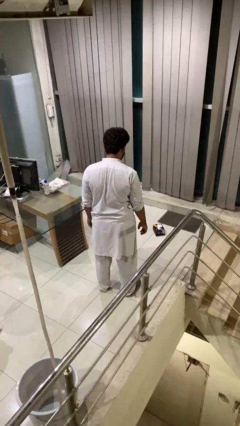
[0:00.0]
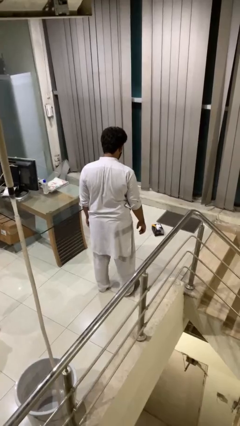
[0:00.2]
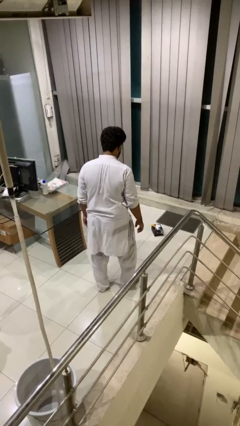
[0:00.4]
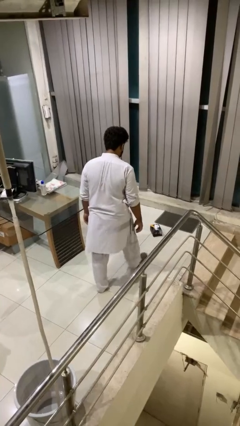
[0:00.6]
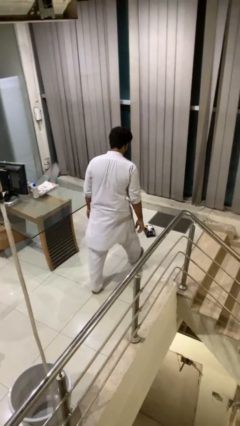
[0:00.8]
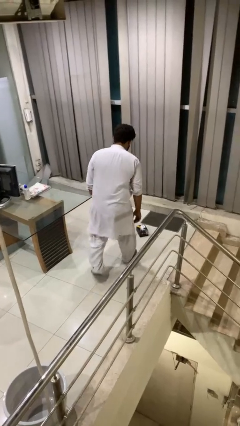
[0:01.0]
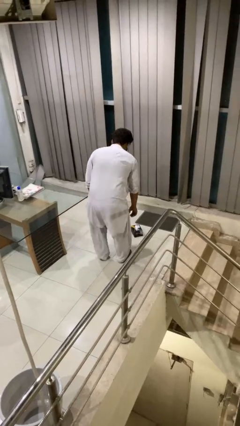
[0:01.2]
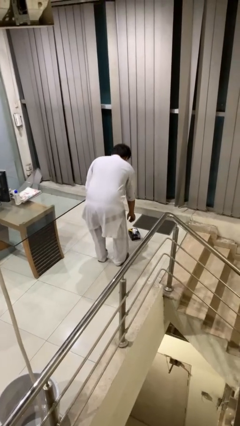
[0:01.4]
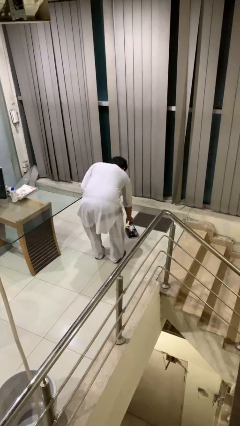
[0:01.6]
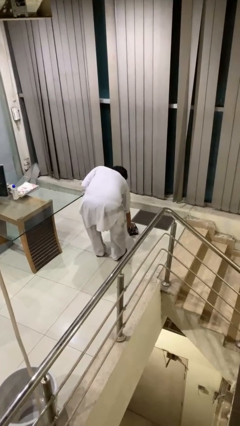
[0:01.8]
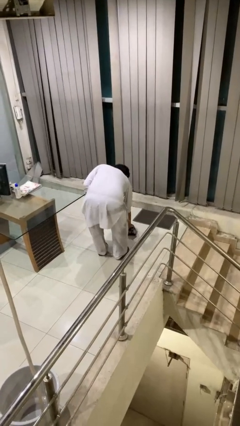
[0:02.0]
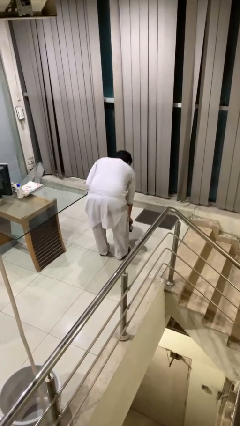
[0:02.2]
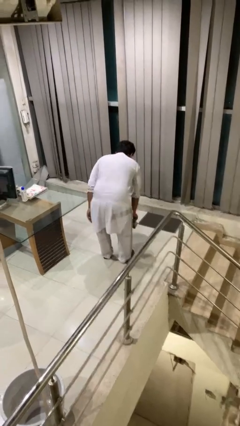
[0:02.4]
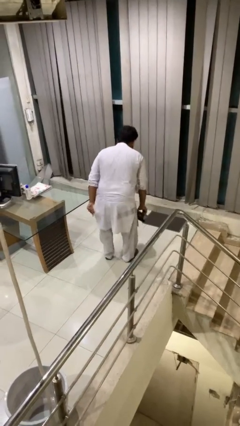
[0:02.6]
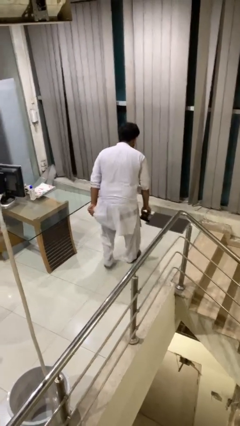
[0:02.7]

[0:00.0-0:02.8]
person picks up object from floor

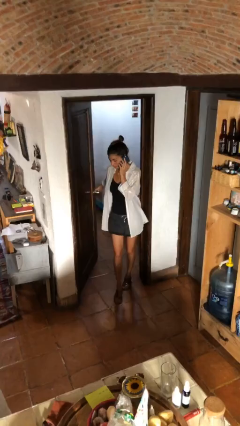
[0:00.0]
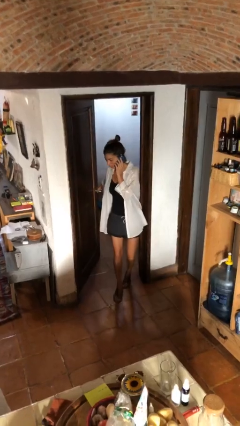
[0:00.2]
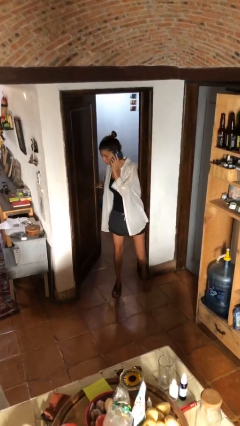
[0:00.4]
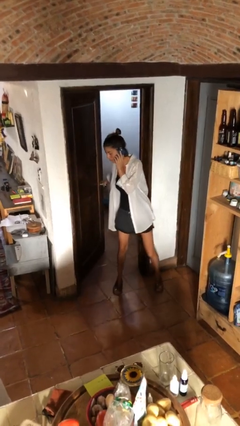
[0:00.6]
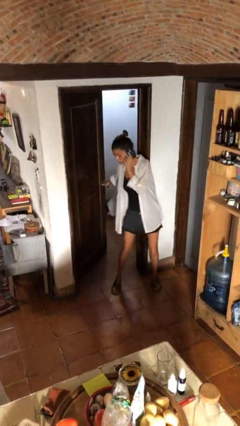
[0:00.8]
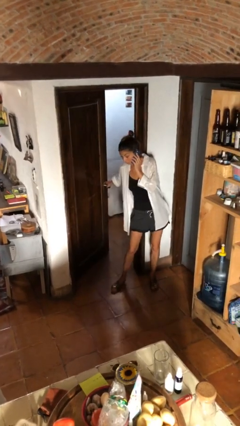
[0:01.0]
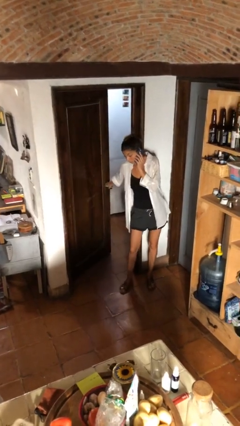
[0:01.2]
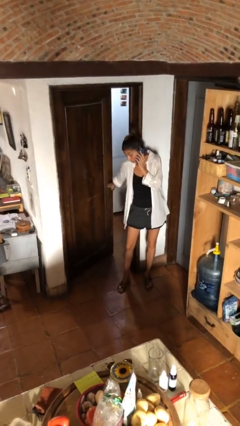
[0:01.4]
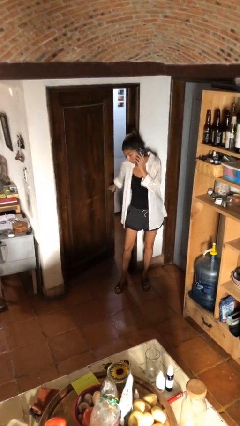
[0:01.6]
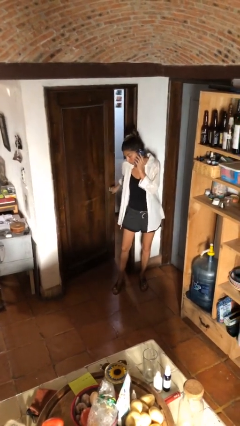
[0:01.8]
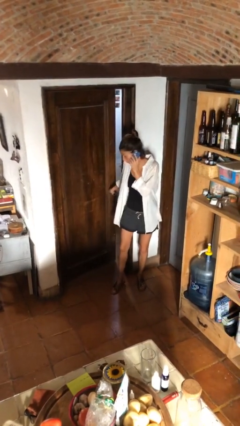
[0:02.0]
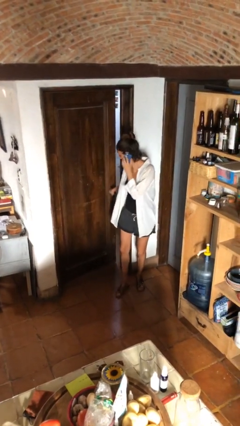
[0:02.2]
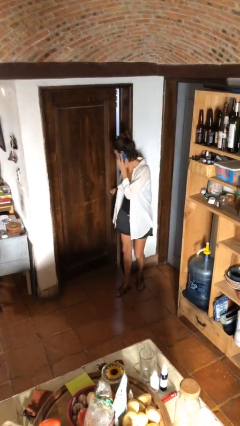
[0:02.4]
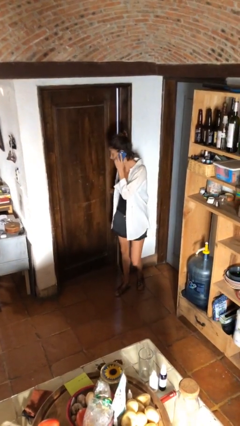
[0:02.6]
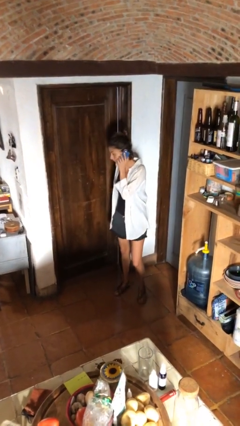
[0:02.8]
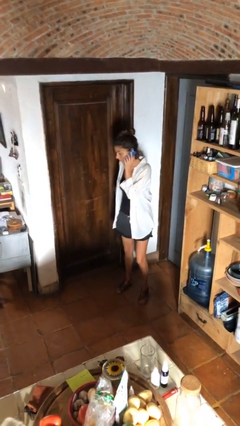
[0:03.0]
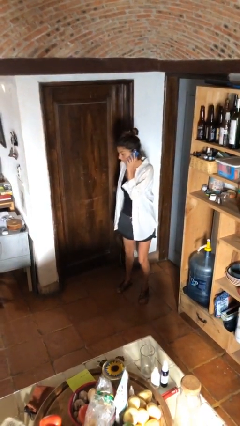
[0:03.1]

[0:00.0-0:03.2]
person closes facility door

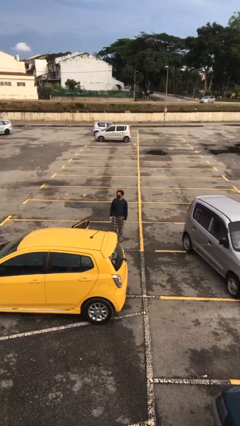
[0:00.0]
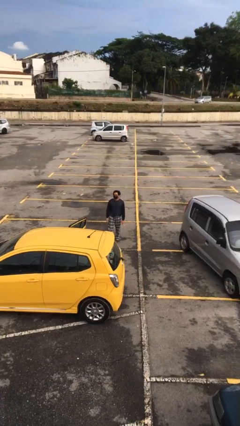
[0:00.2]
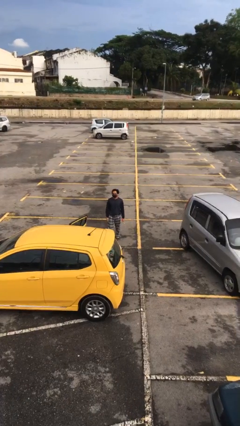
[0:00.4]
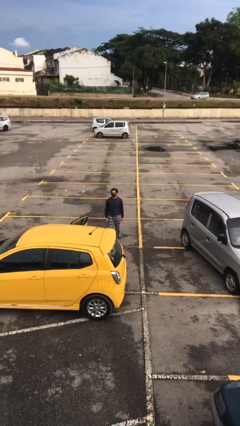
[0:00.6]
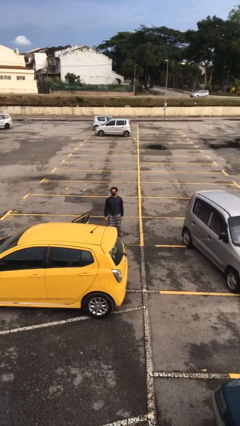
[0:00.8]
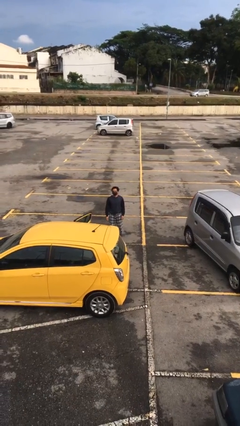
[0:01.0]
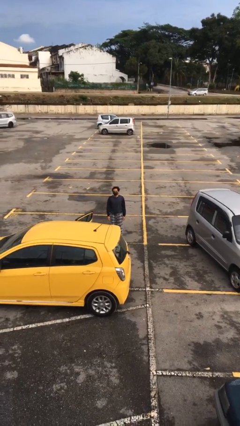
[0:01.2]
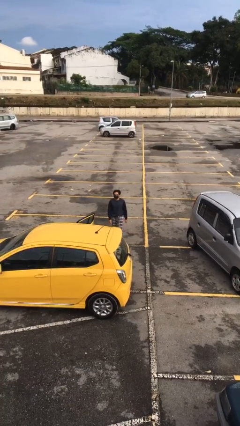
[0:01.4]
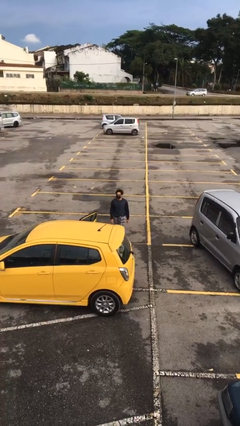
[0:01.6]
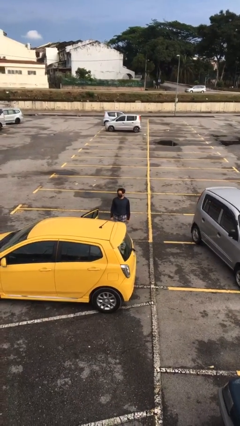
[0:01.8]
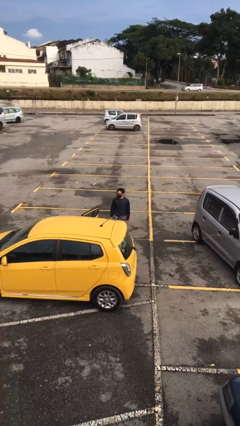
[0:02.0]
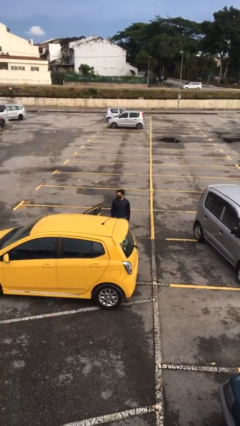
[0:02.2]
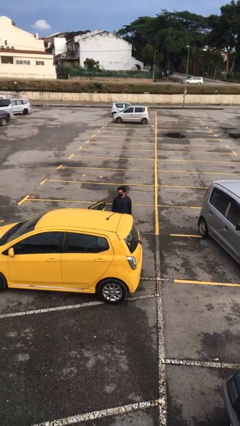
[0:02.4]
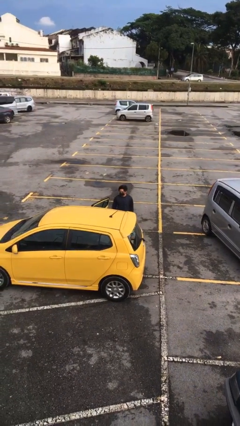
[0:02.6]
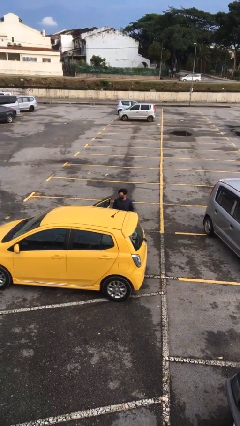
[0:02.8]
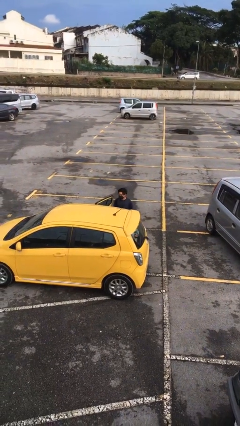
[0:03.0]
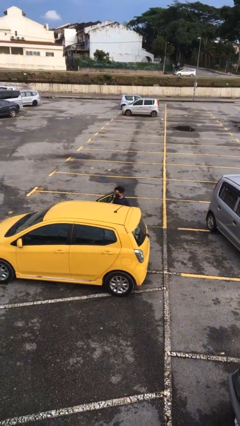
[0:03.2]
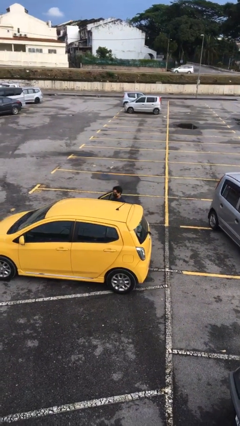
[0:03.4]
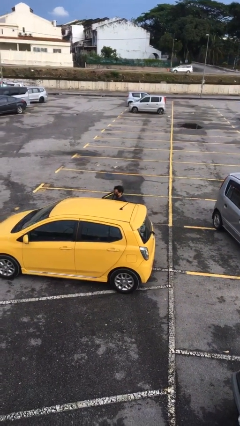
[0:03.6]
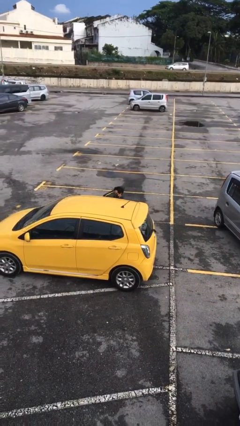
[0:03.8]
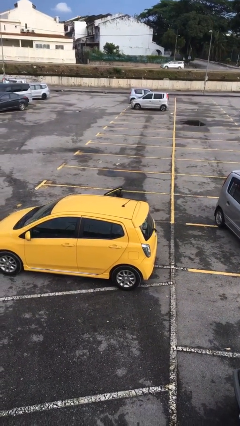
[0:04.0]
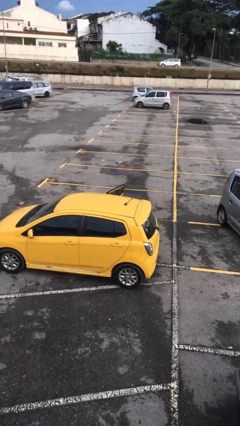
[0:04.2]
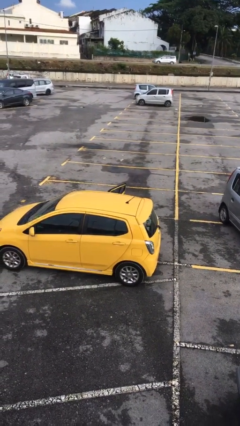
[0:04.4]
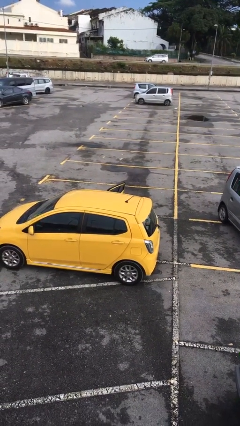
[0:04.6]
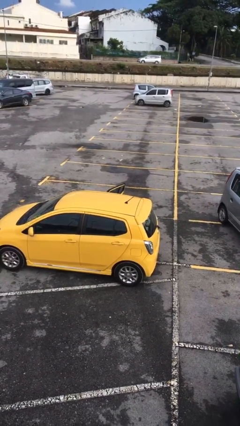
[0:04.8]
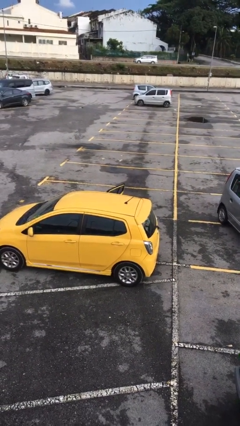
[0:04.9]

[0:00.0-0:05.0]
person enters car

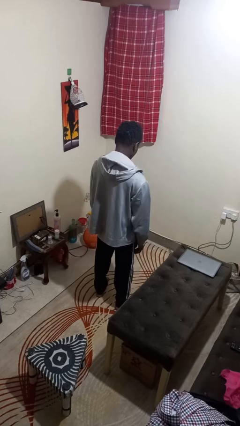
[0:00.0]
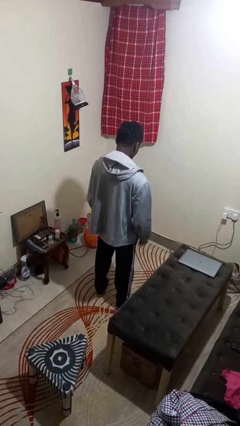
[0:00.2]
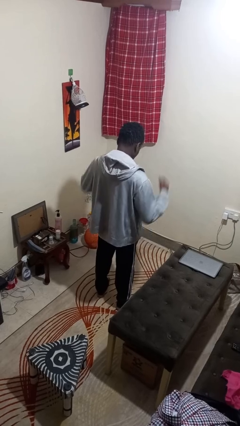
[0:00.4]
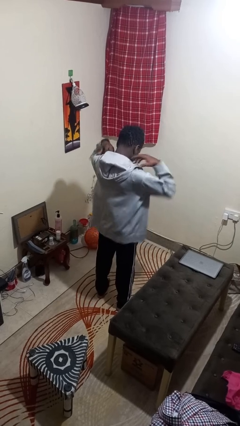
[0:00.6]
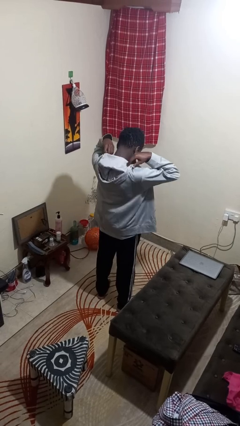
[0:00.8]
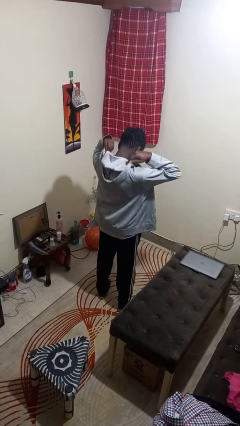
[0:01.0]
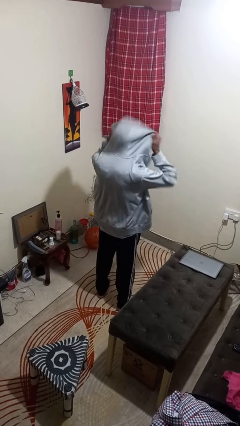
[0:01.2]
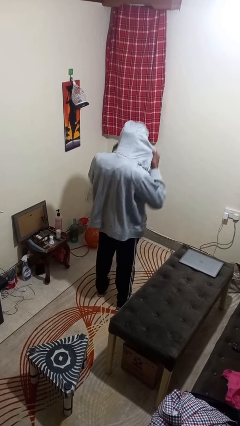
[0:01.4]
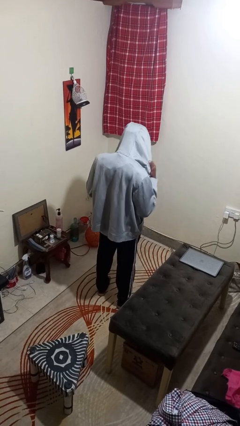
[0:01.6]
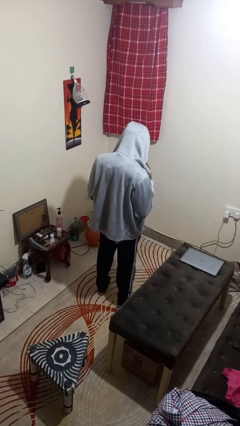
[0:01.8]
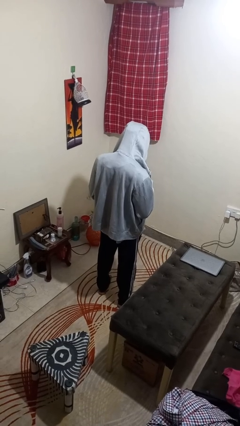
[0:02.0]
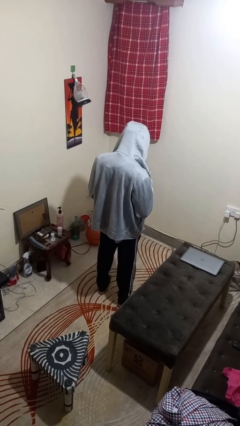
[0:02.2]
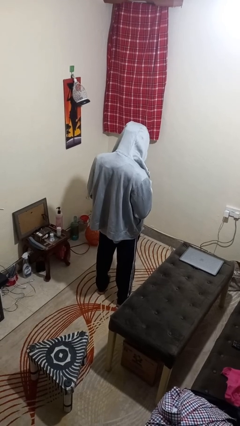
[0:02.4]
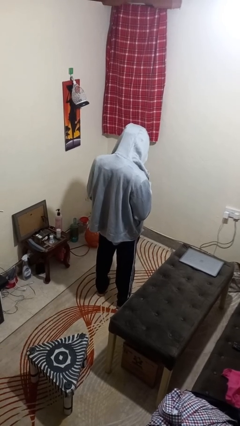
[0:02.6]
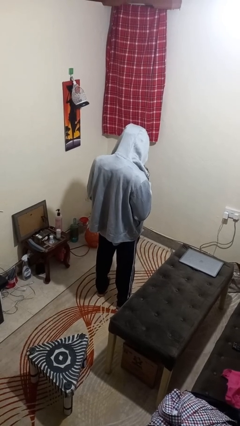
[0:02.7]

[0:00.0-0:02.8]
person puts on hoodie

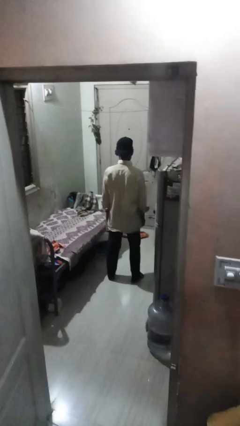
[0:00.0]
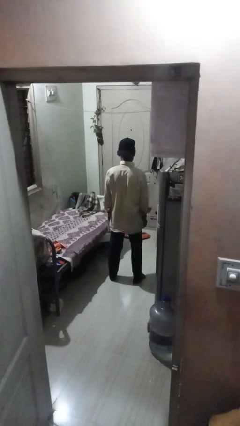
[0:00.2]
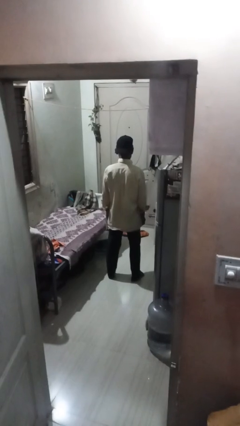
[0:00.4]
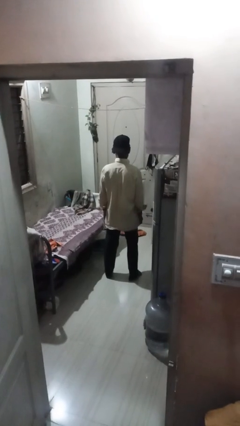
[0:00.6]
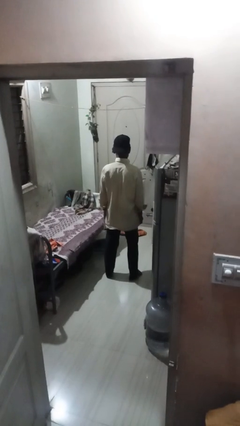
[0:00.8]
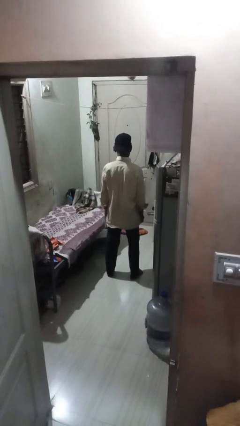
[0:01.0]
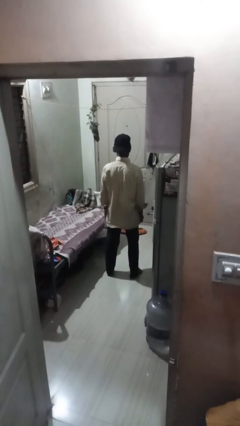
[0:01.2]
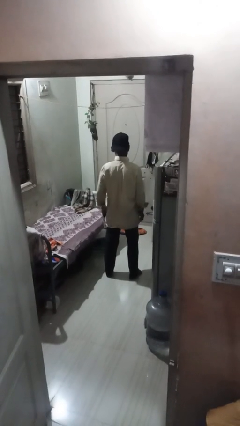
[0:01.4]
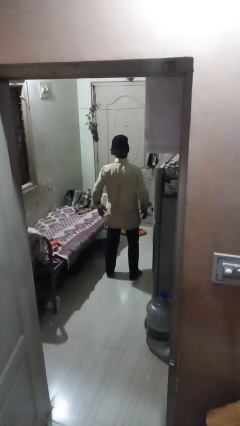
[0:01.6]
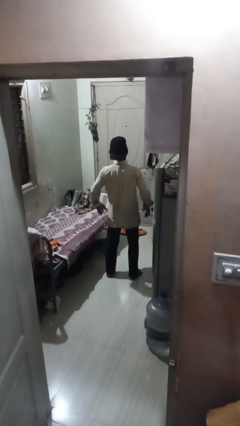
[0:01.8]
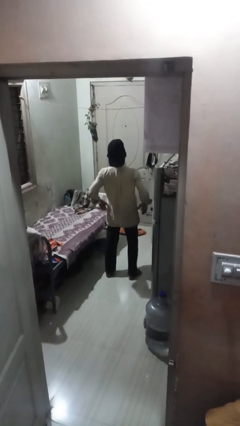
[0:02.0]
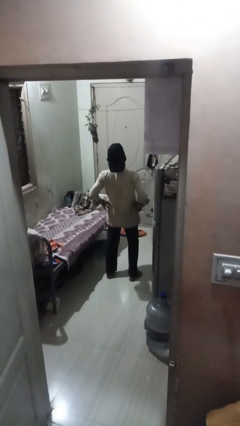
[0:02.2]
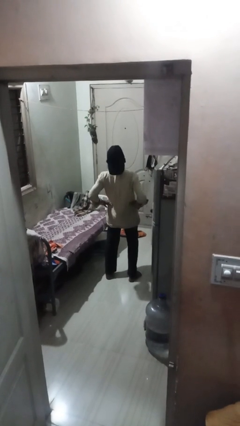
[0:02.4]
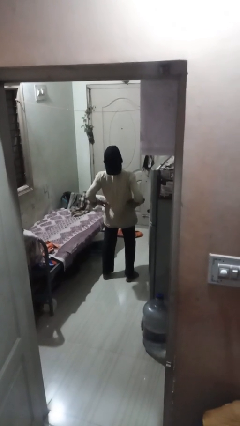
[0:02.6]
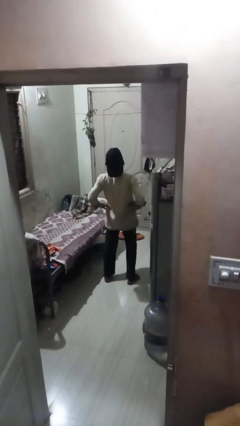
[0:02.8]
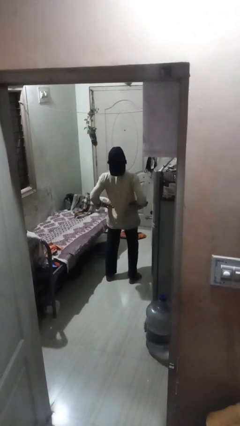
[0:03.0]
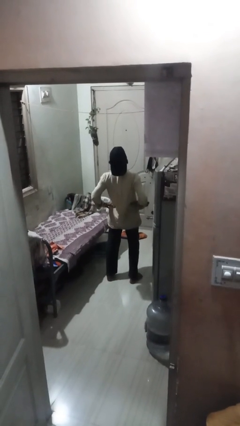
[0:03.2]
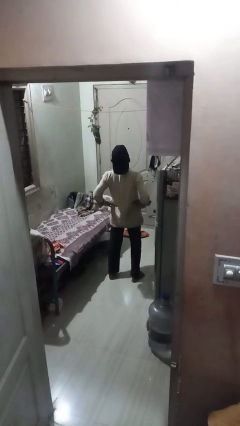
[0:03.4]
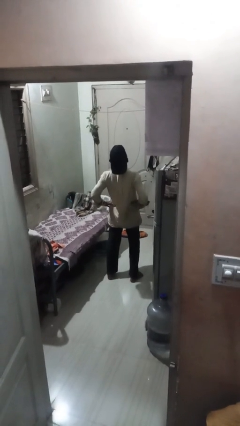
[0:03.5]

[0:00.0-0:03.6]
person stretches back

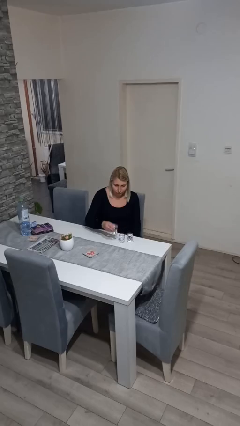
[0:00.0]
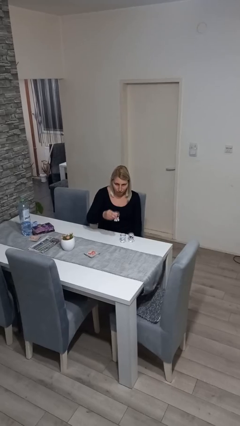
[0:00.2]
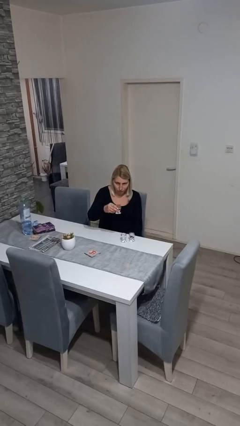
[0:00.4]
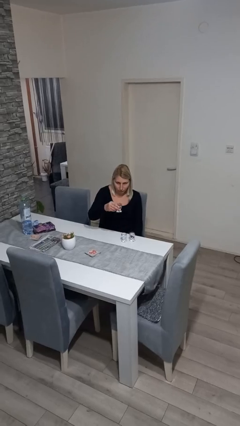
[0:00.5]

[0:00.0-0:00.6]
person picks up object from table
